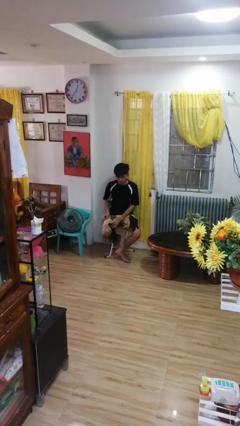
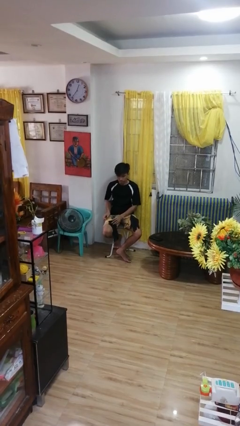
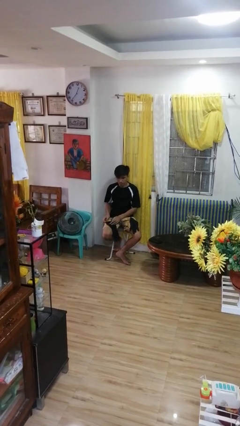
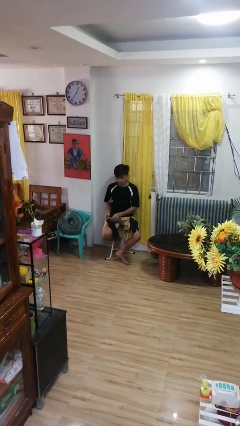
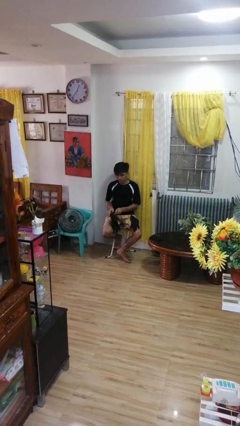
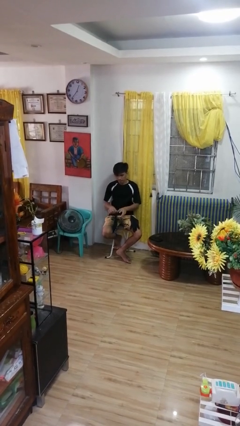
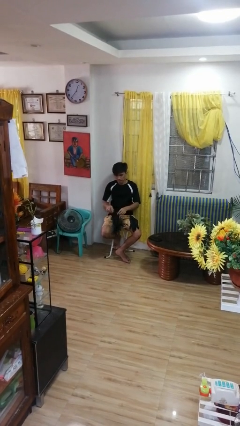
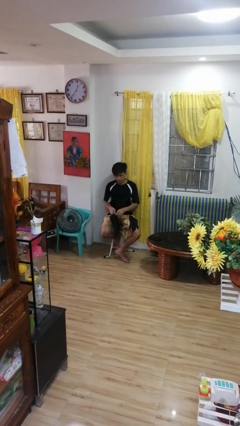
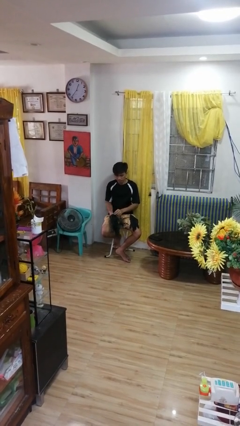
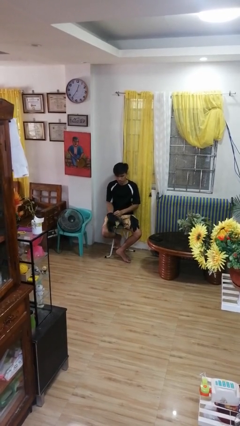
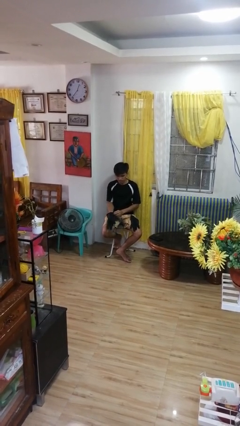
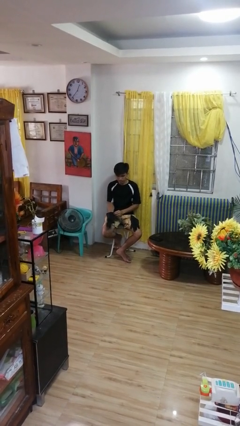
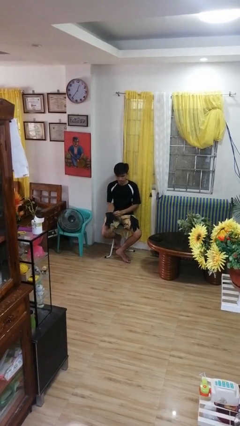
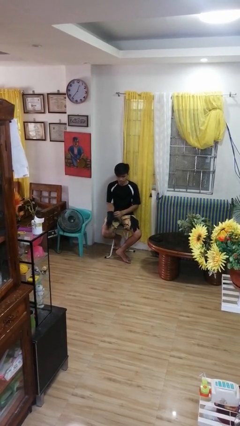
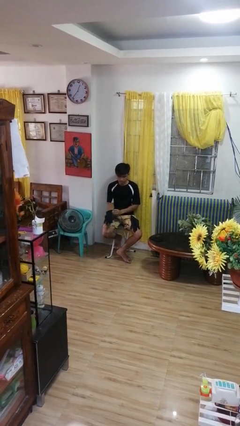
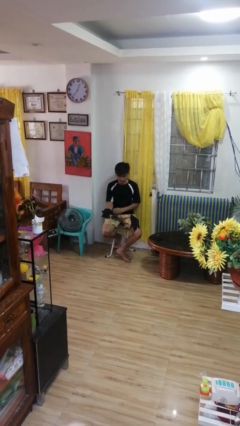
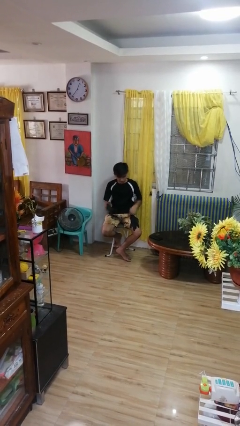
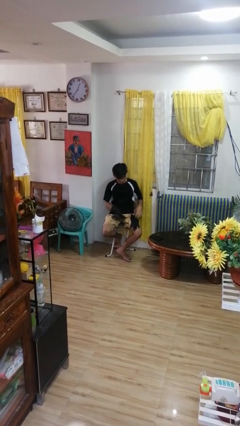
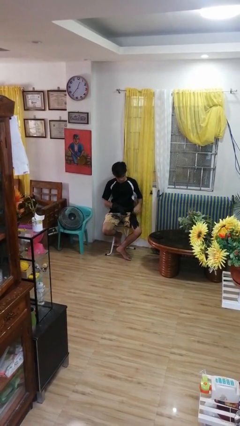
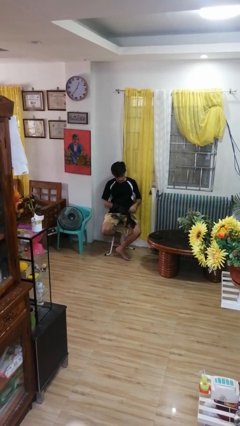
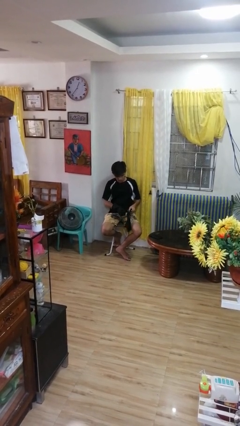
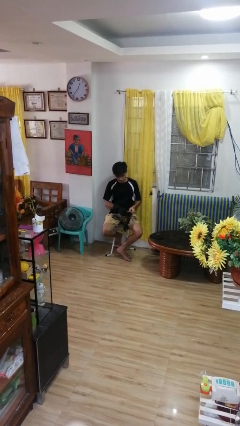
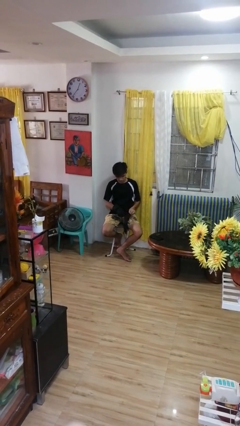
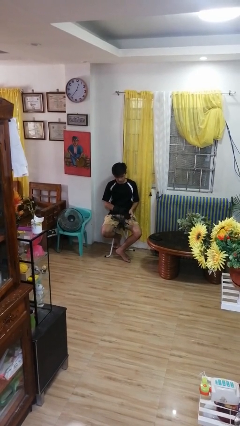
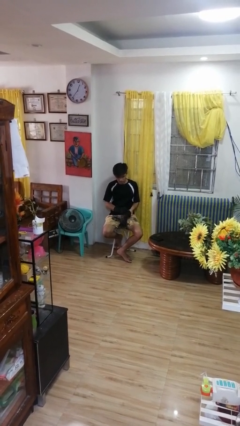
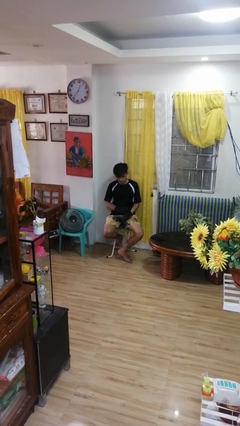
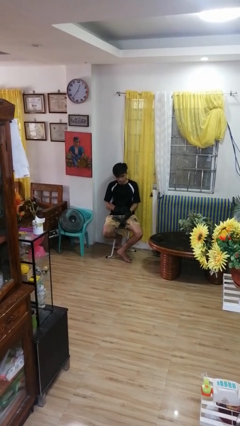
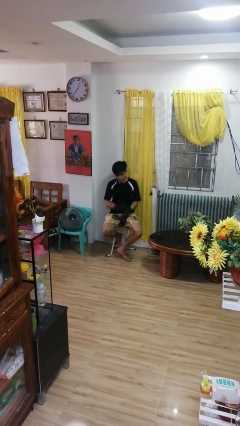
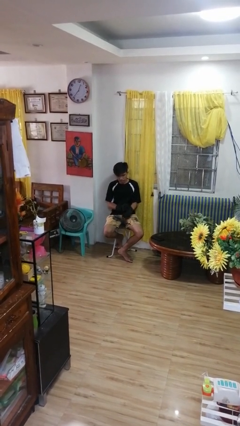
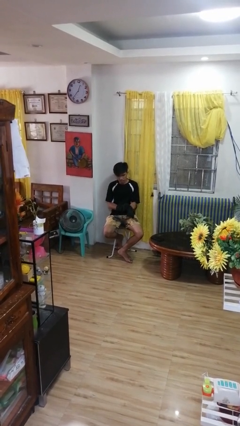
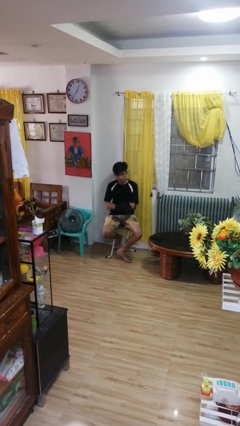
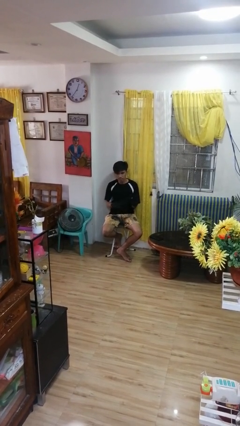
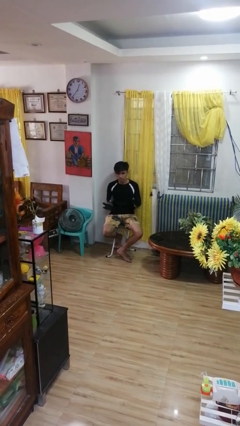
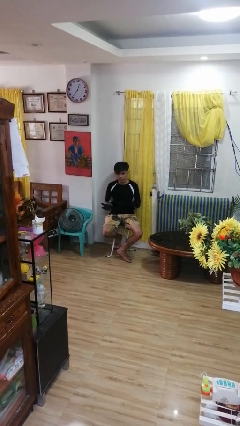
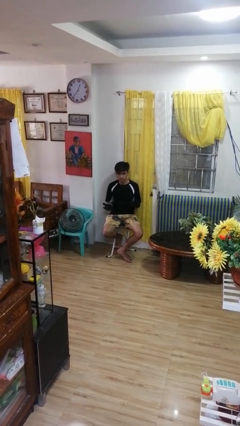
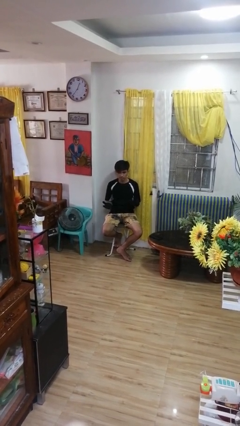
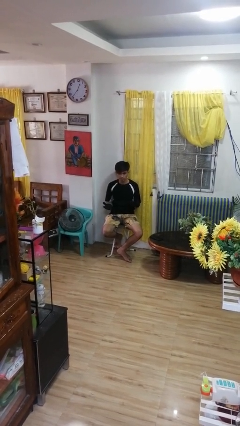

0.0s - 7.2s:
person puts on gloves

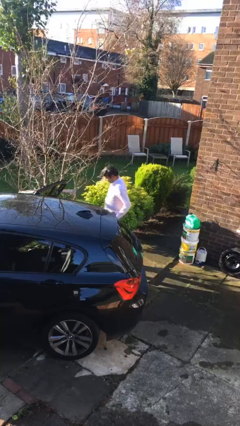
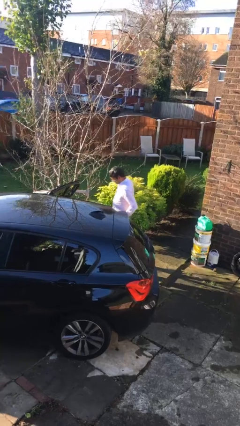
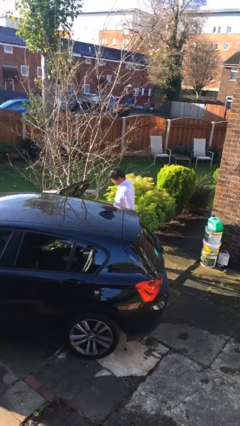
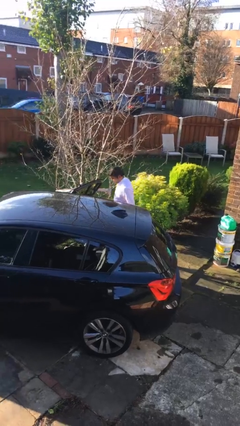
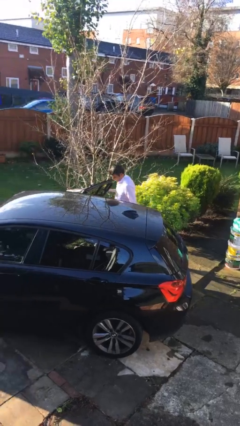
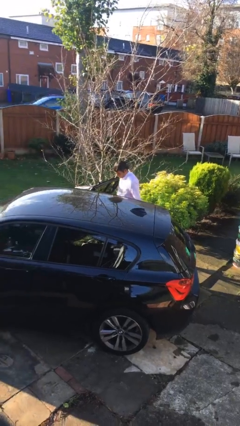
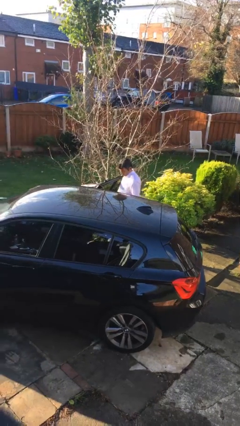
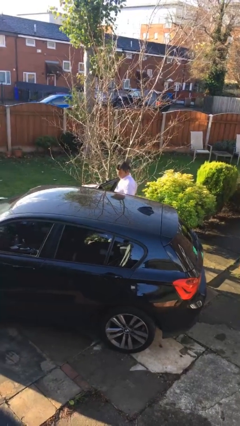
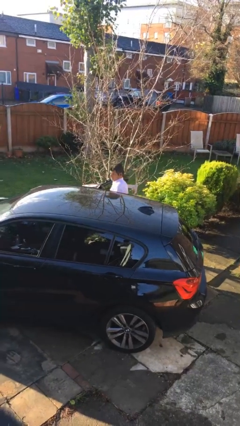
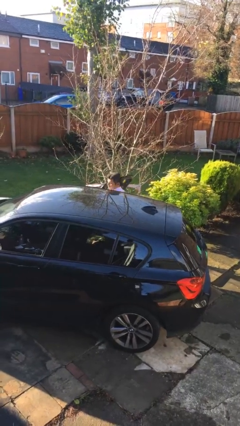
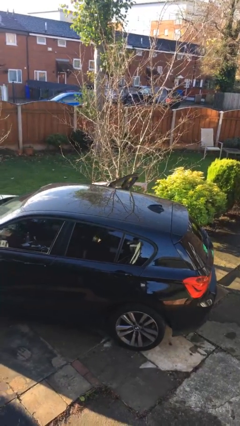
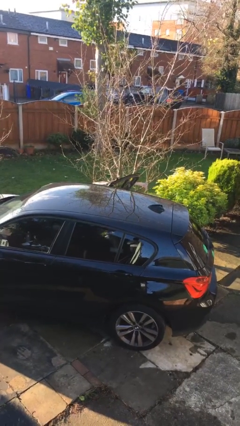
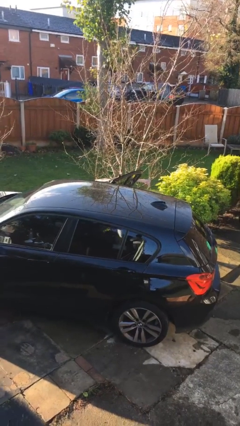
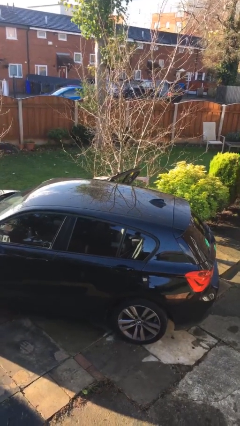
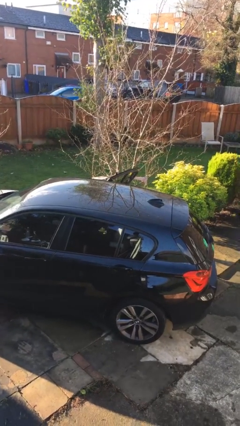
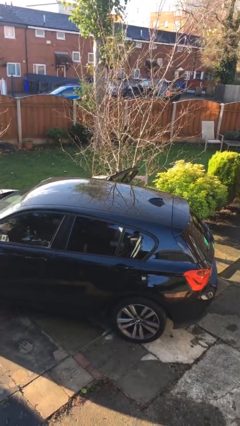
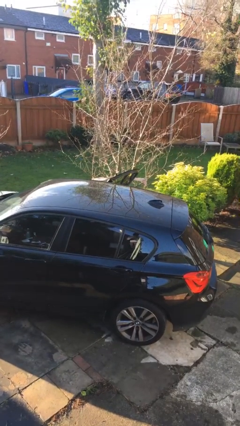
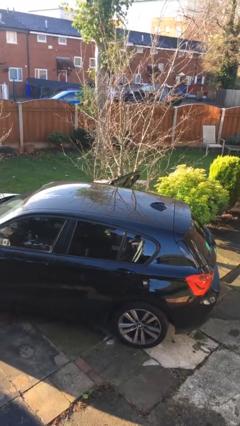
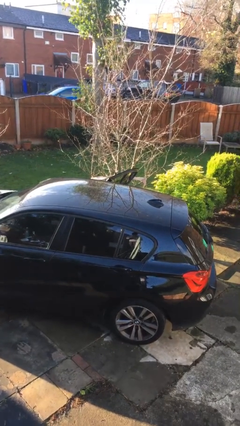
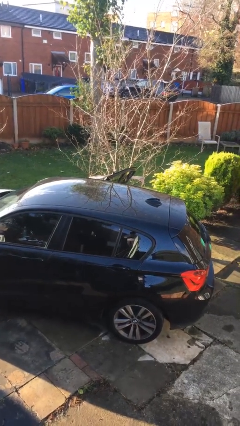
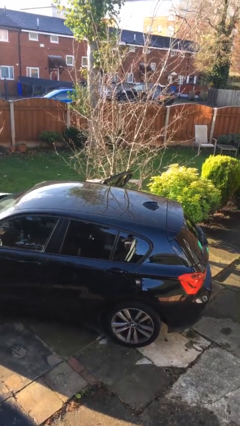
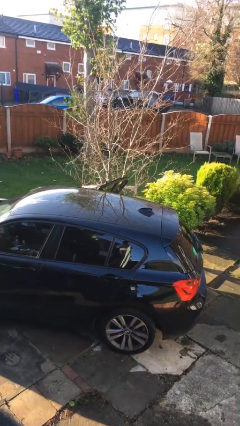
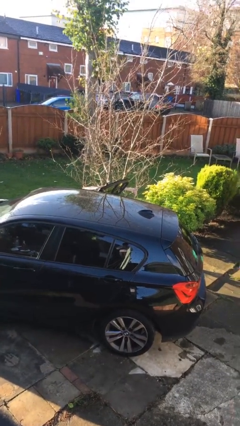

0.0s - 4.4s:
person enters car

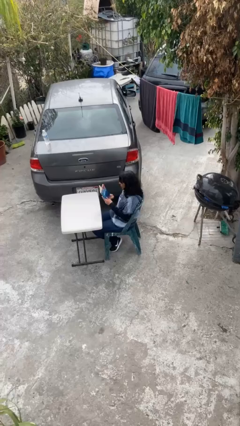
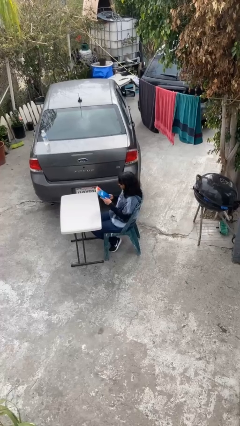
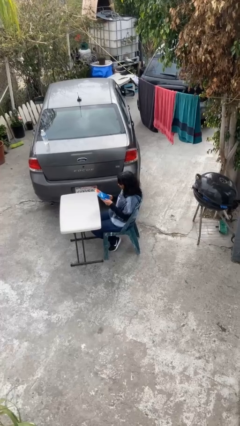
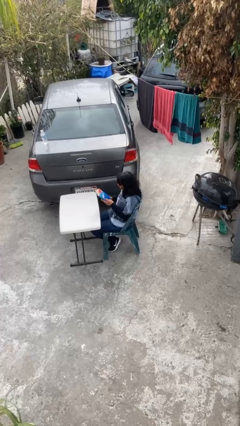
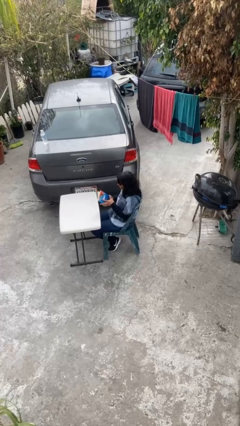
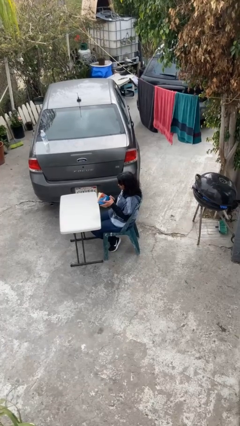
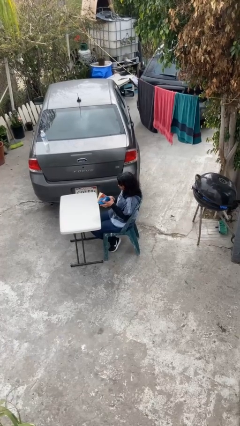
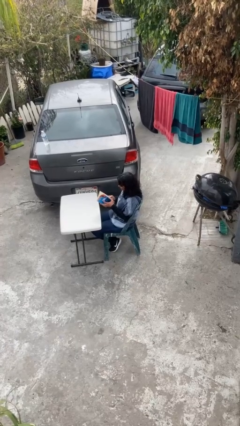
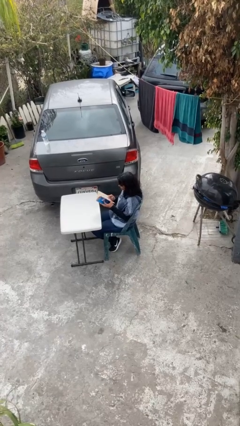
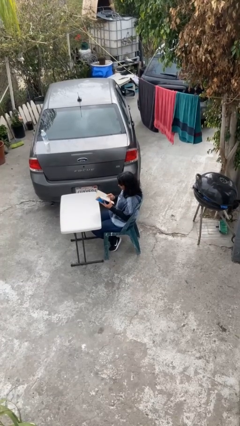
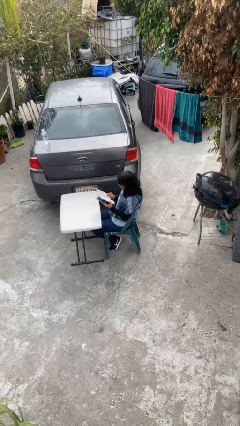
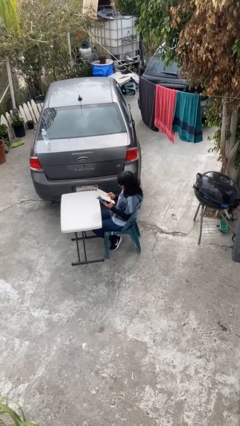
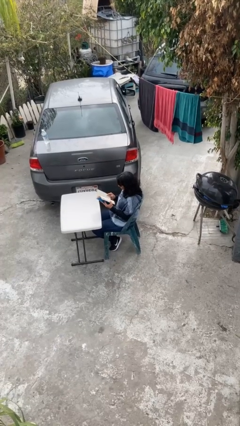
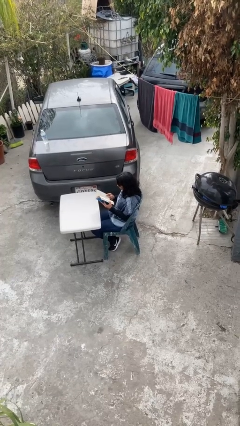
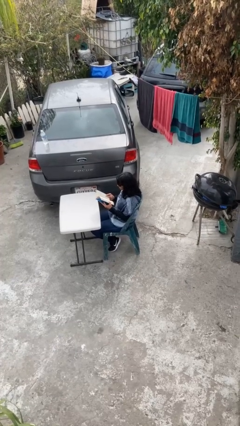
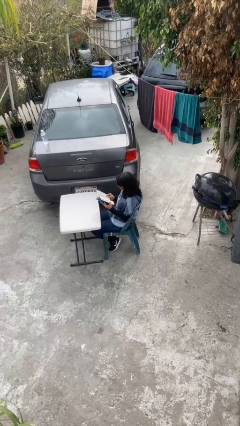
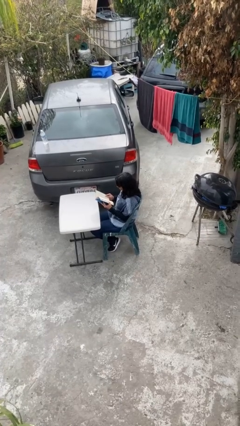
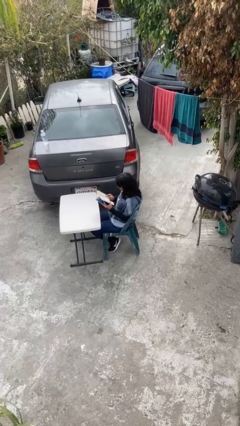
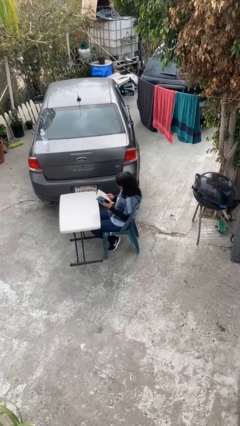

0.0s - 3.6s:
person reads document

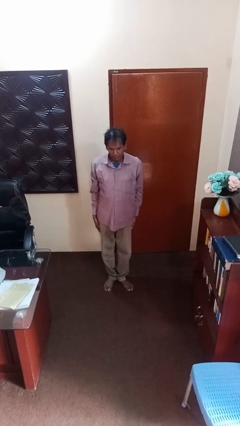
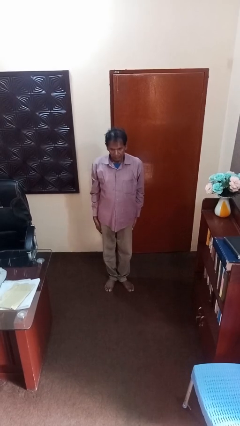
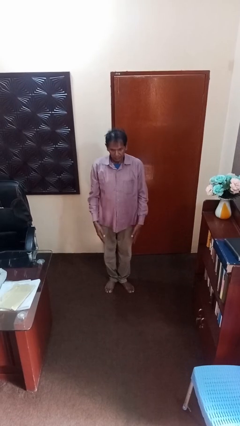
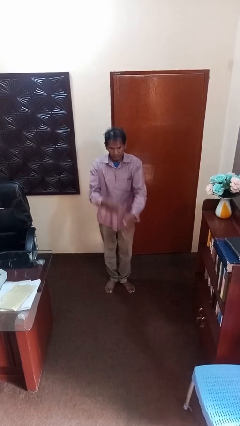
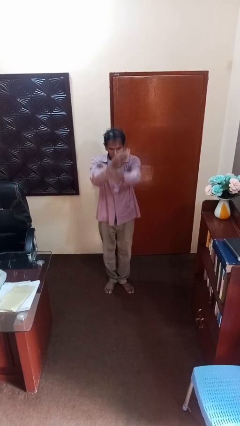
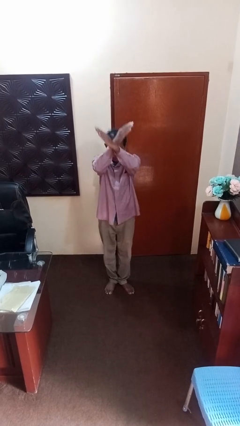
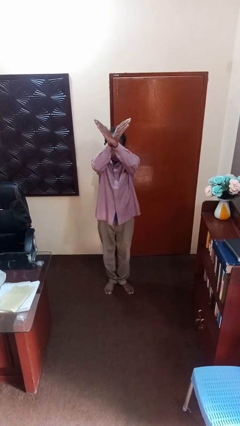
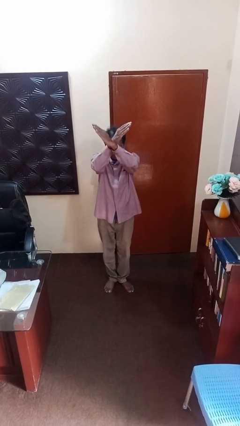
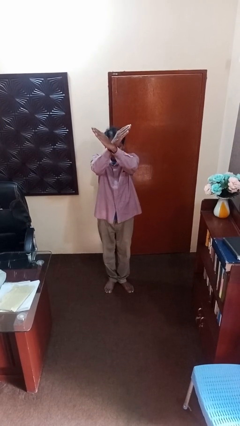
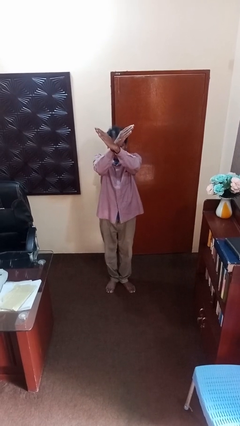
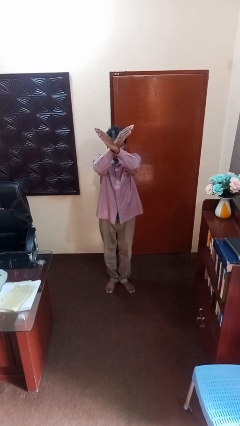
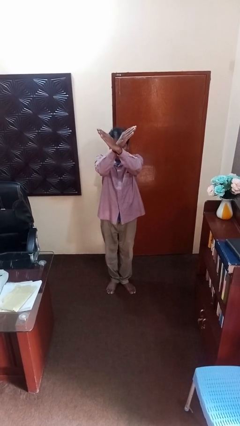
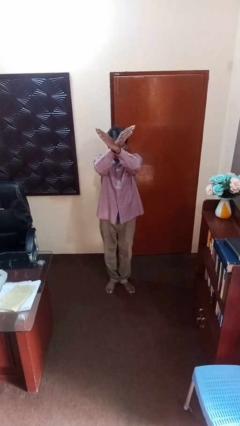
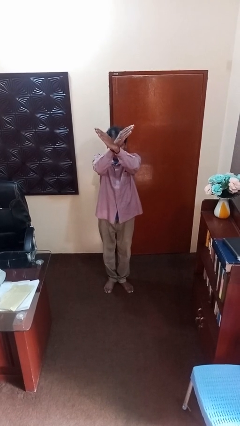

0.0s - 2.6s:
person gestures arms x
